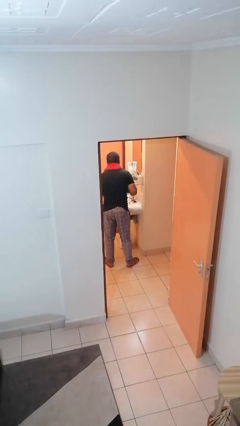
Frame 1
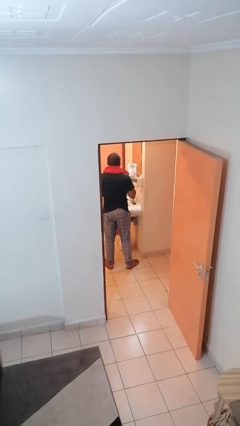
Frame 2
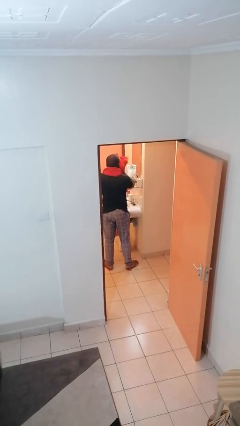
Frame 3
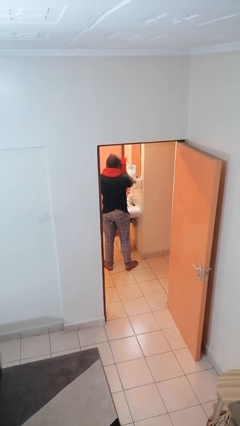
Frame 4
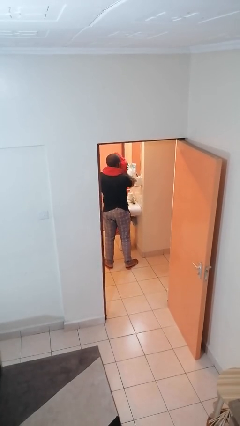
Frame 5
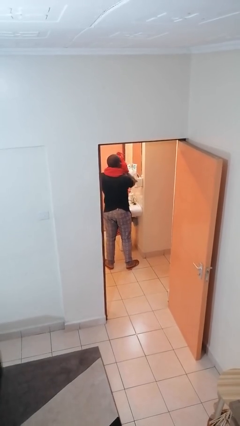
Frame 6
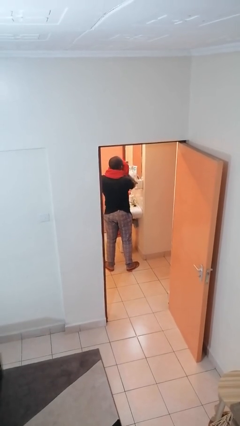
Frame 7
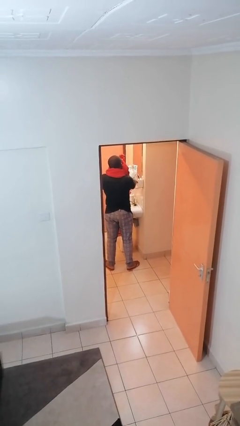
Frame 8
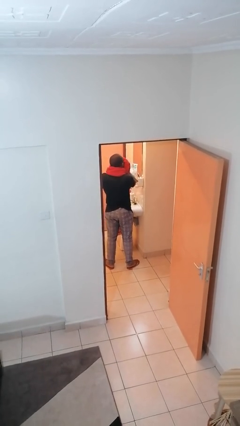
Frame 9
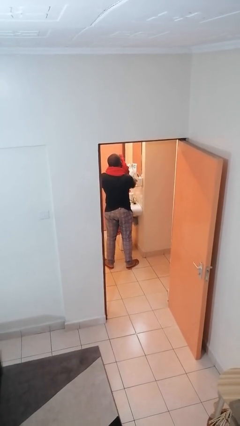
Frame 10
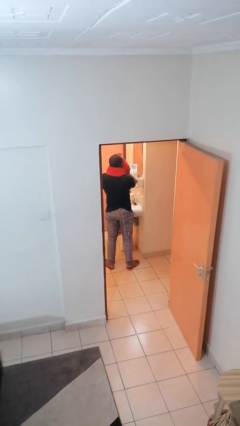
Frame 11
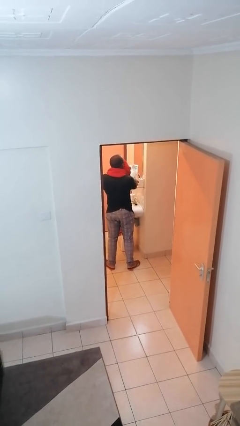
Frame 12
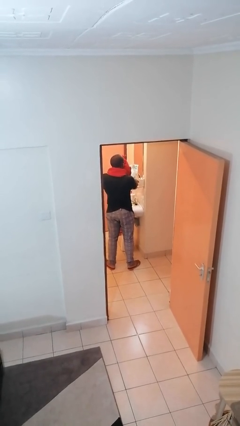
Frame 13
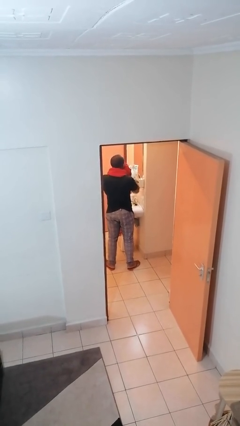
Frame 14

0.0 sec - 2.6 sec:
person dries face with towel

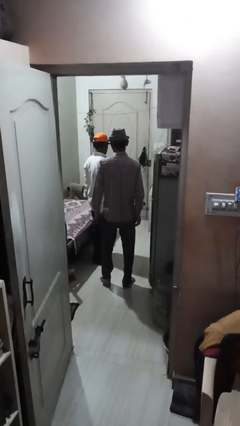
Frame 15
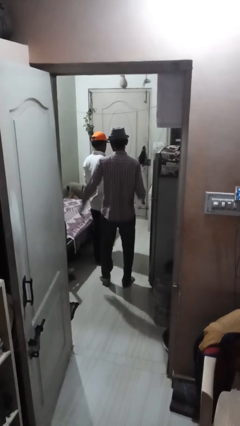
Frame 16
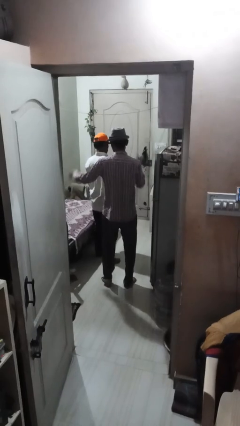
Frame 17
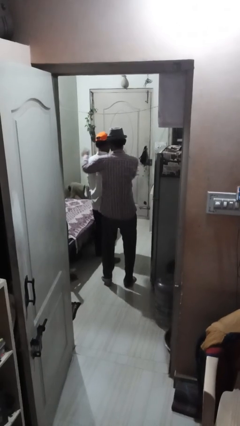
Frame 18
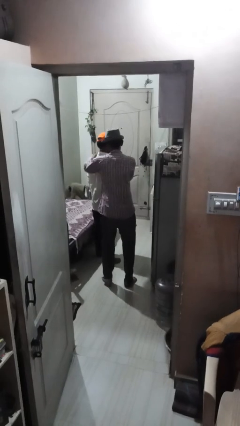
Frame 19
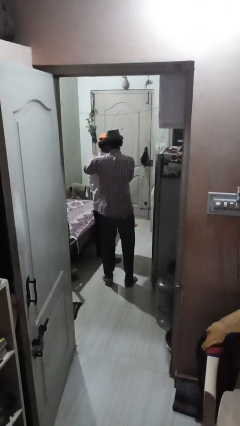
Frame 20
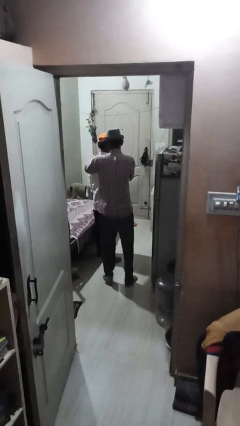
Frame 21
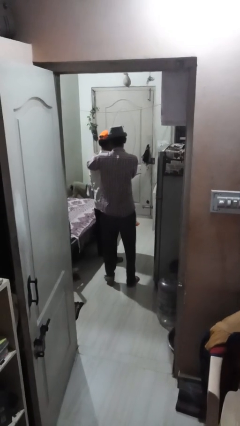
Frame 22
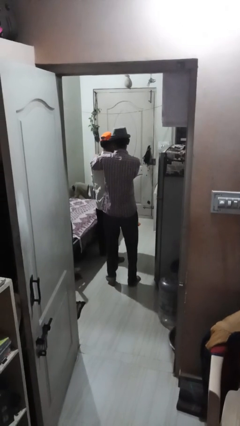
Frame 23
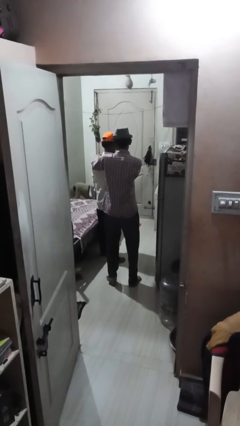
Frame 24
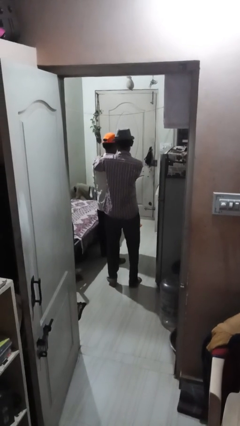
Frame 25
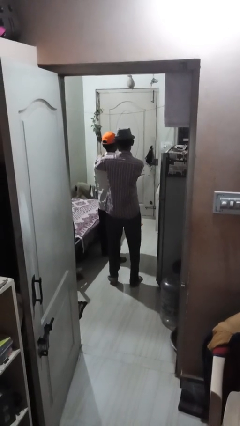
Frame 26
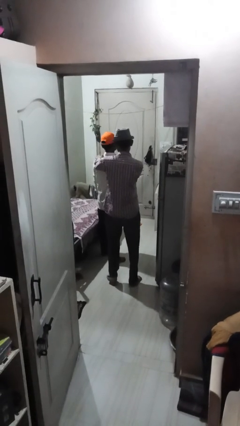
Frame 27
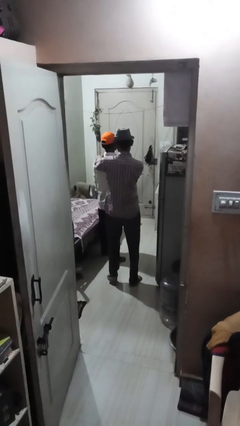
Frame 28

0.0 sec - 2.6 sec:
person pounds shoulders of person

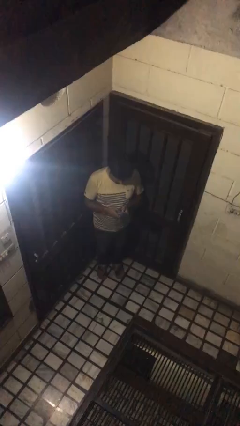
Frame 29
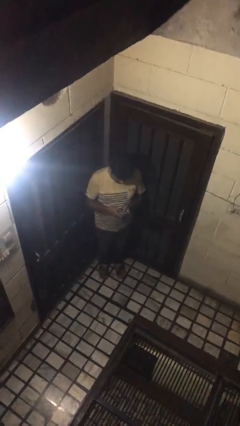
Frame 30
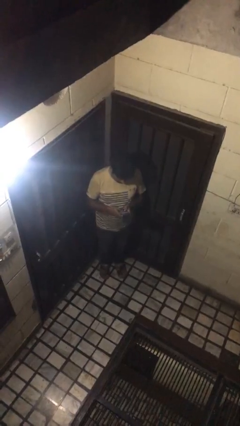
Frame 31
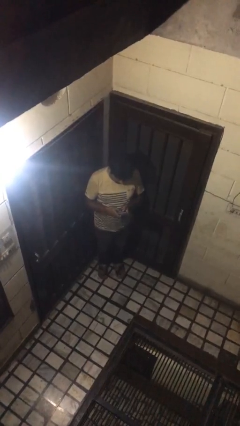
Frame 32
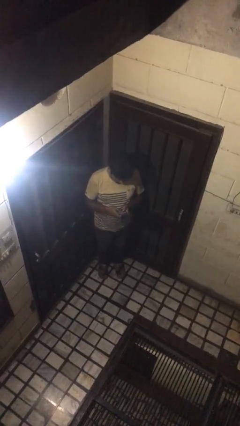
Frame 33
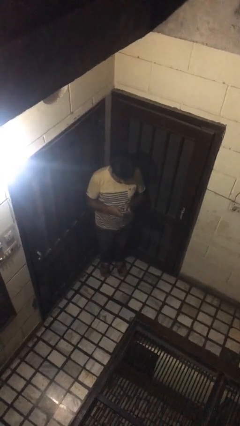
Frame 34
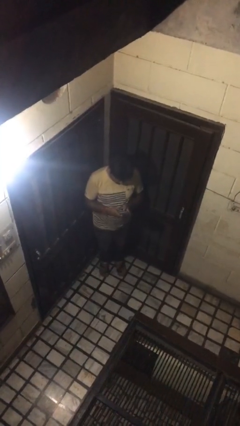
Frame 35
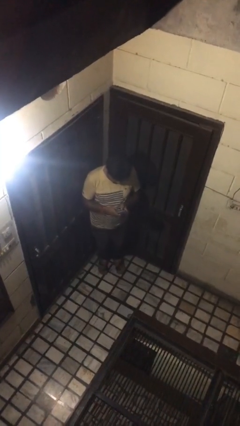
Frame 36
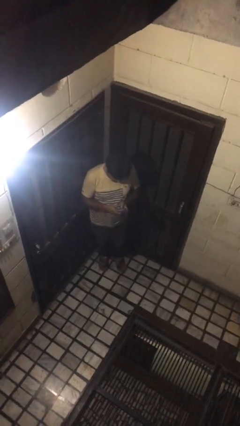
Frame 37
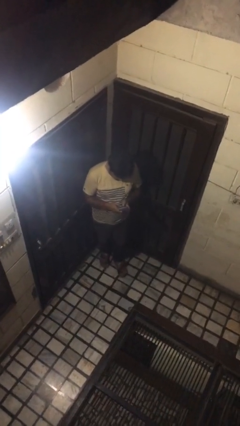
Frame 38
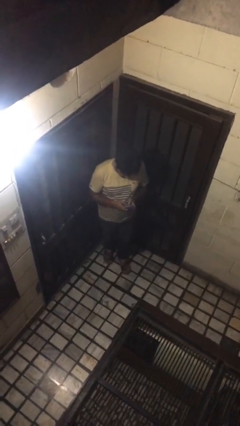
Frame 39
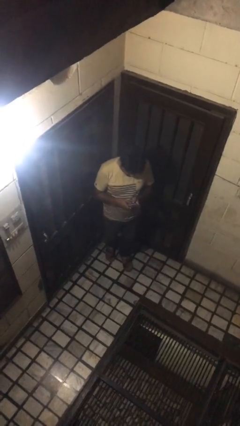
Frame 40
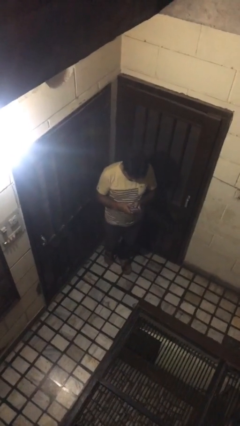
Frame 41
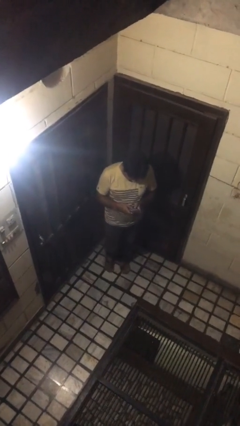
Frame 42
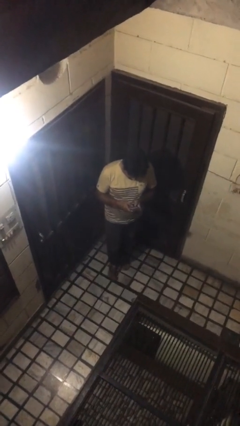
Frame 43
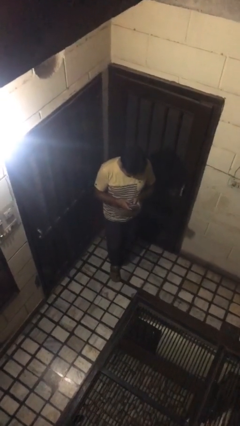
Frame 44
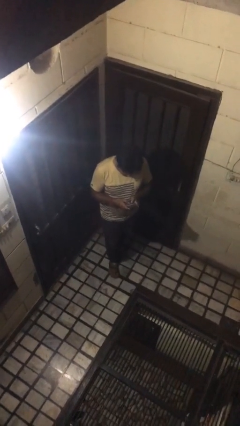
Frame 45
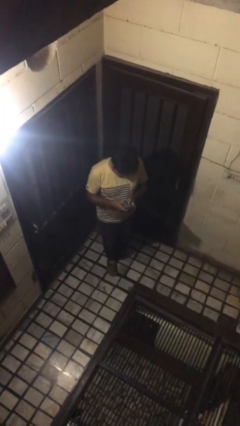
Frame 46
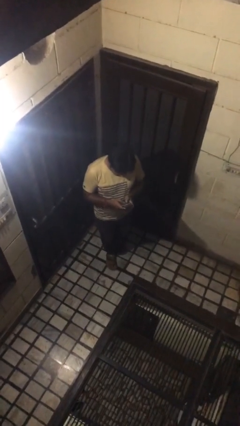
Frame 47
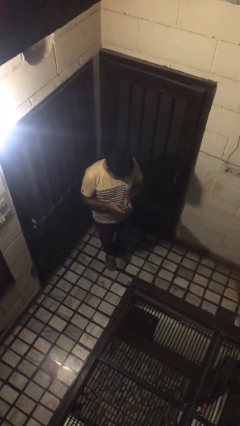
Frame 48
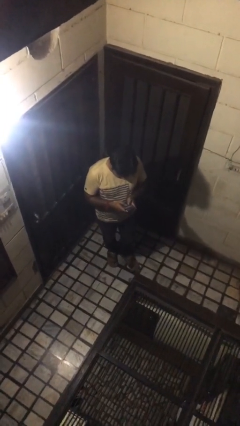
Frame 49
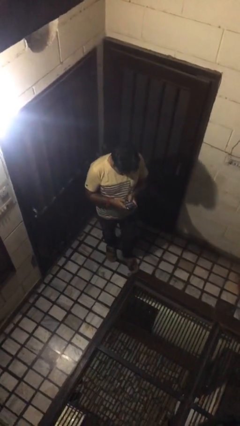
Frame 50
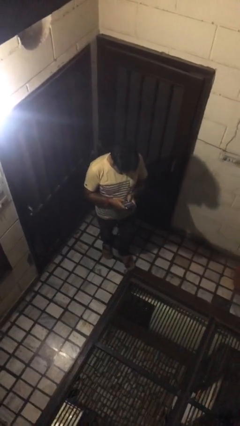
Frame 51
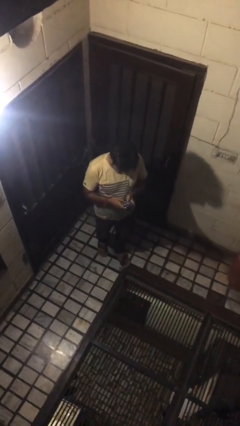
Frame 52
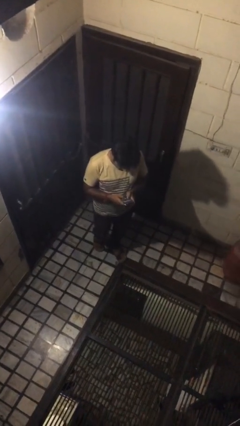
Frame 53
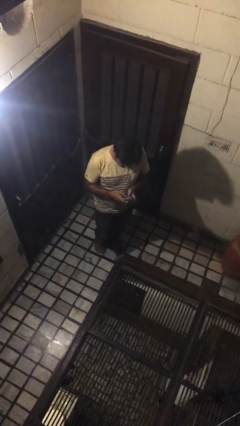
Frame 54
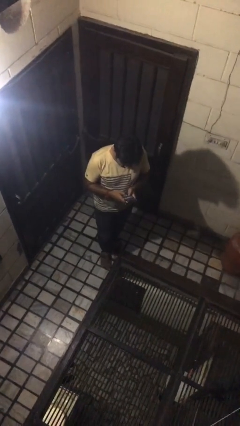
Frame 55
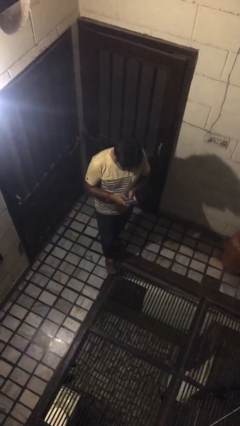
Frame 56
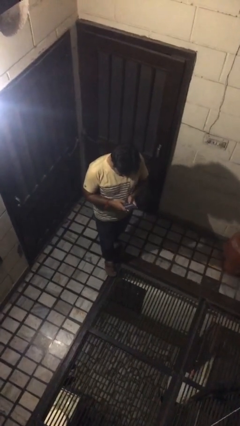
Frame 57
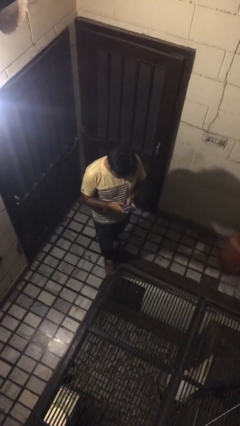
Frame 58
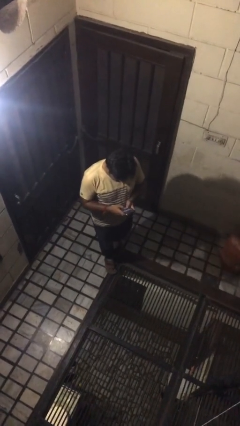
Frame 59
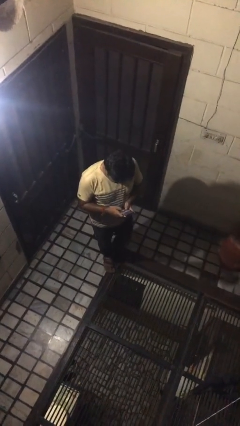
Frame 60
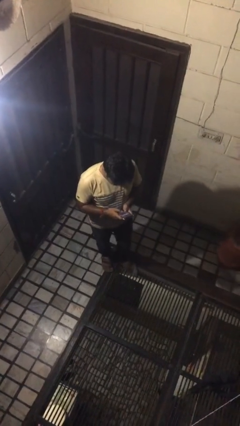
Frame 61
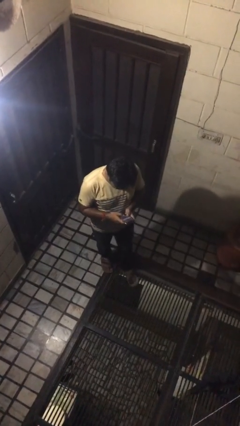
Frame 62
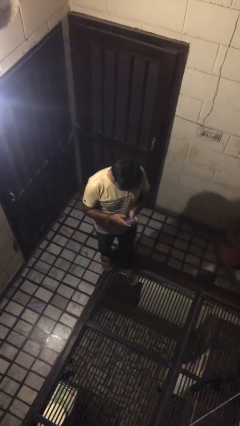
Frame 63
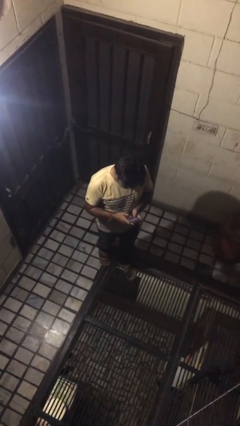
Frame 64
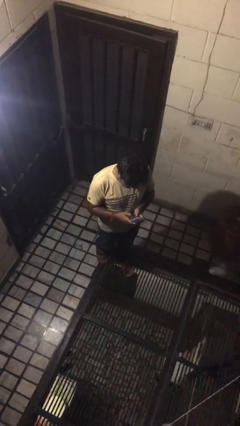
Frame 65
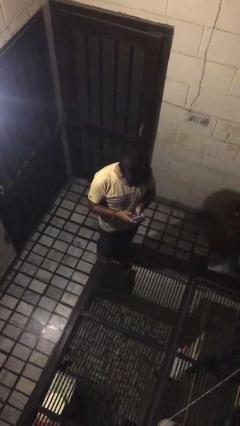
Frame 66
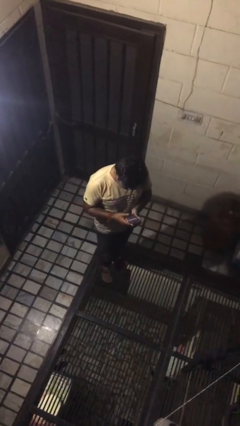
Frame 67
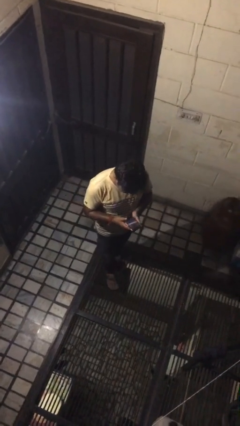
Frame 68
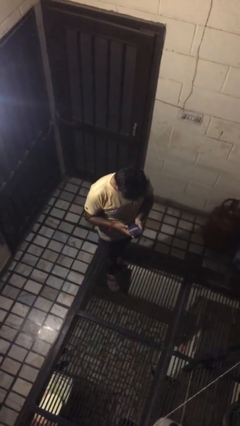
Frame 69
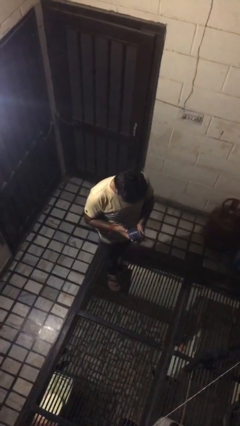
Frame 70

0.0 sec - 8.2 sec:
person texts on phone

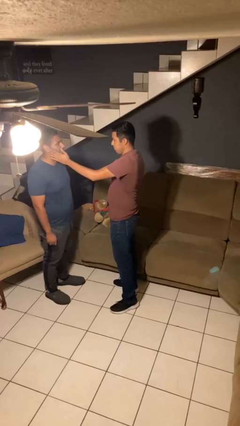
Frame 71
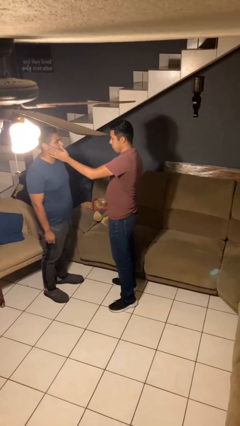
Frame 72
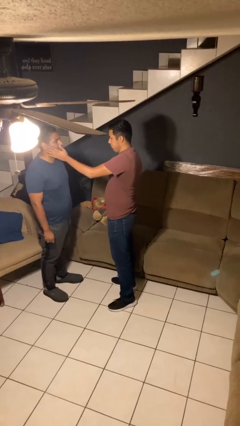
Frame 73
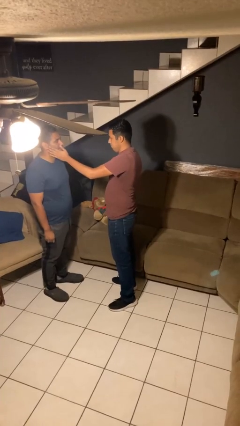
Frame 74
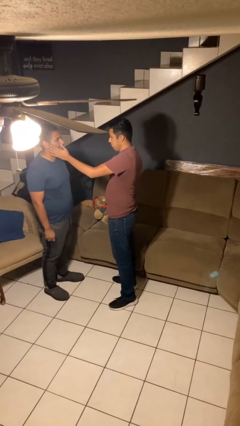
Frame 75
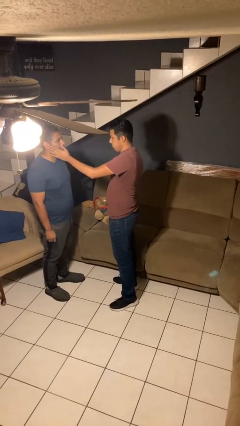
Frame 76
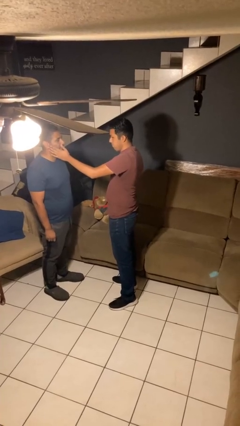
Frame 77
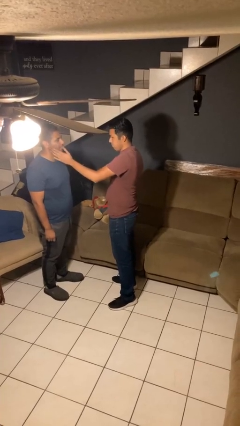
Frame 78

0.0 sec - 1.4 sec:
person touches face of person

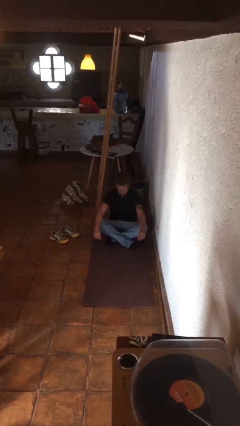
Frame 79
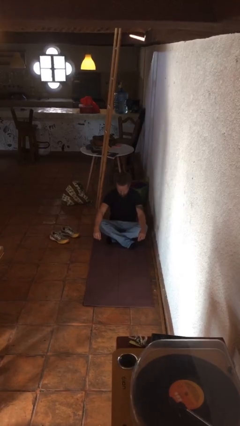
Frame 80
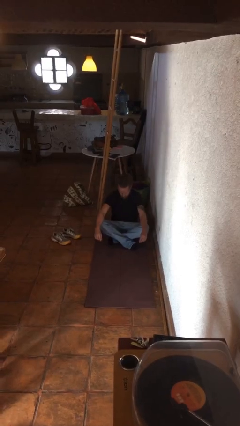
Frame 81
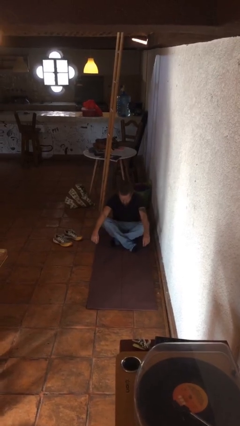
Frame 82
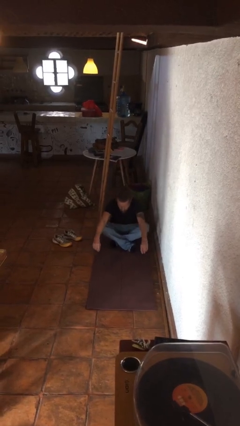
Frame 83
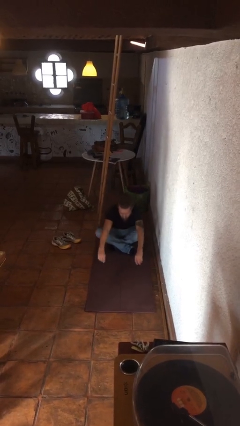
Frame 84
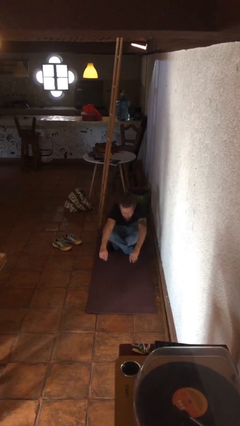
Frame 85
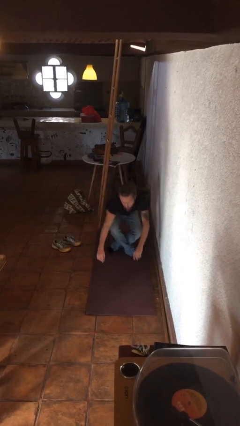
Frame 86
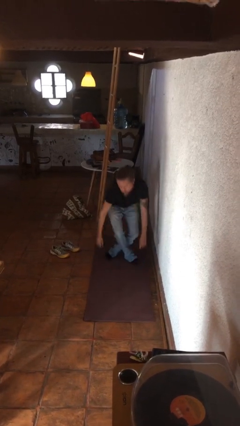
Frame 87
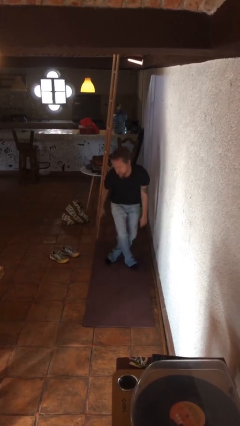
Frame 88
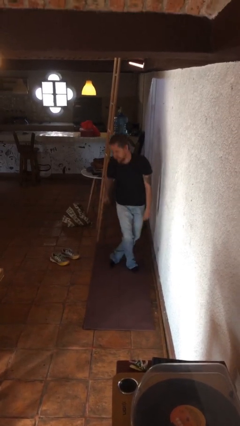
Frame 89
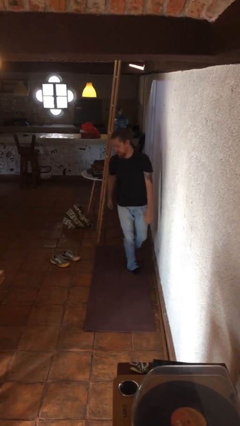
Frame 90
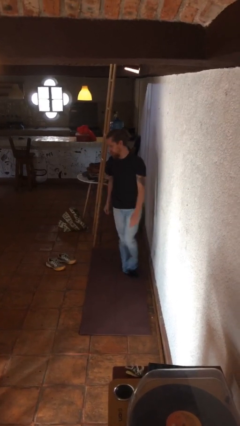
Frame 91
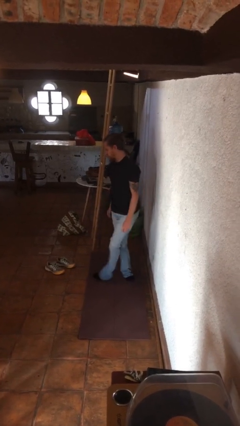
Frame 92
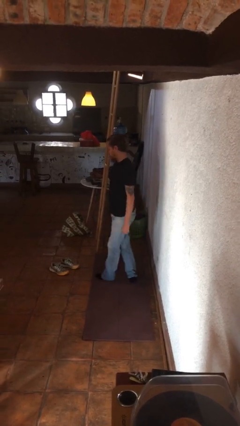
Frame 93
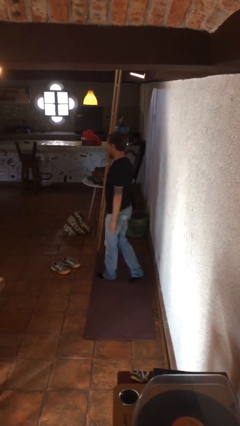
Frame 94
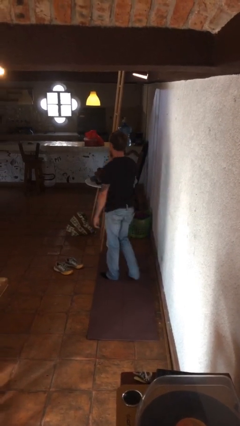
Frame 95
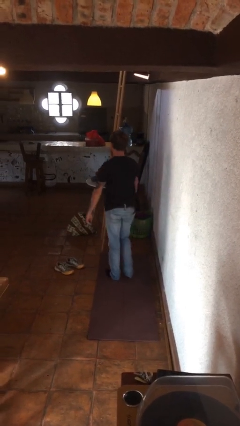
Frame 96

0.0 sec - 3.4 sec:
person stands up from floor
